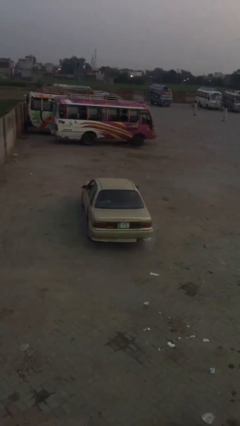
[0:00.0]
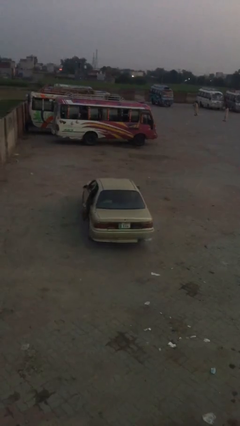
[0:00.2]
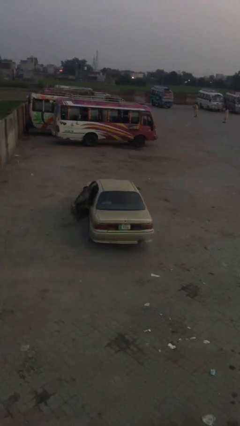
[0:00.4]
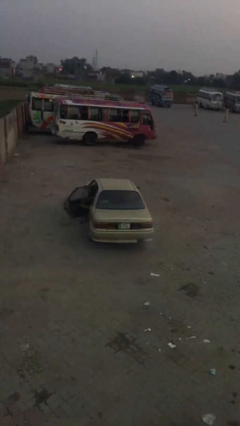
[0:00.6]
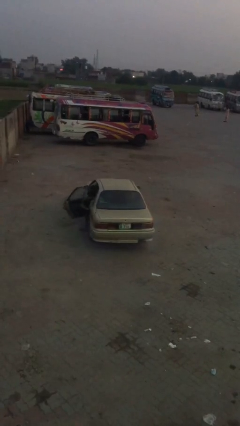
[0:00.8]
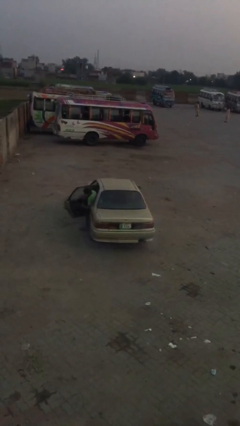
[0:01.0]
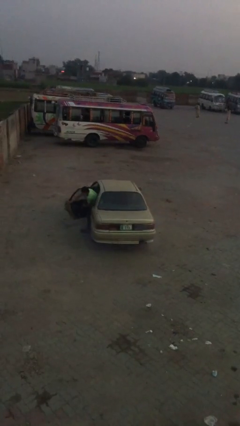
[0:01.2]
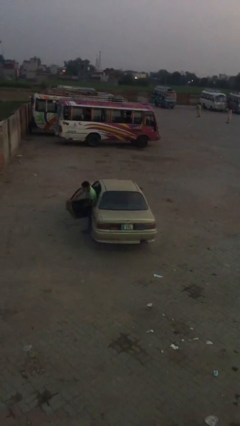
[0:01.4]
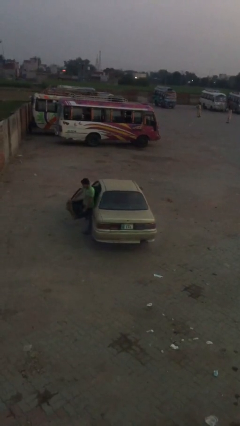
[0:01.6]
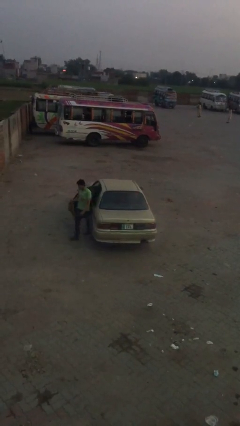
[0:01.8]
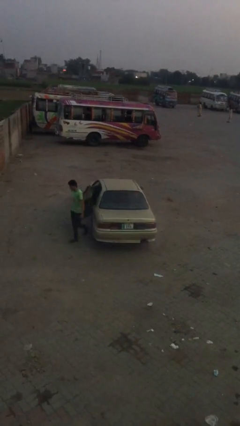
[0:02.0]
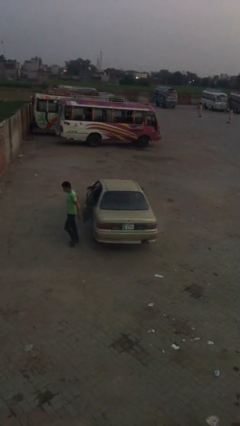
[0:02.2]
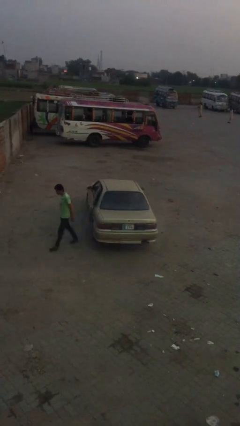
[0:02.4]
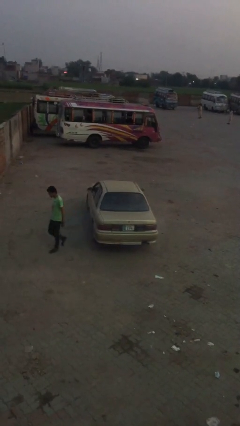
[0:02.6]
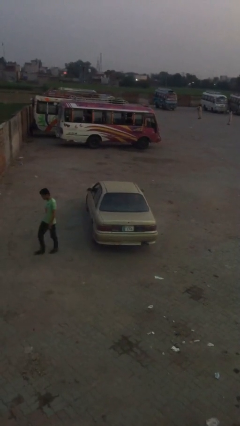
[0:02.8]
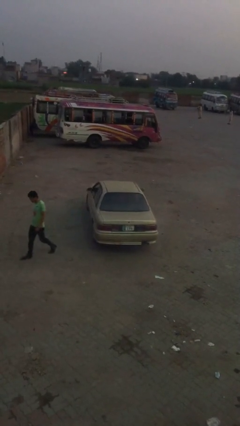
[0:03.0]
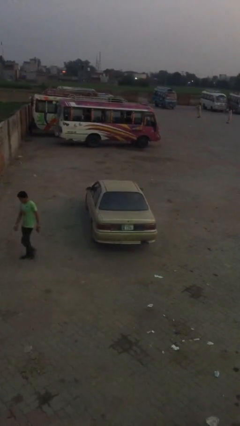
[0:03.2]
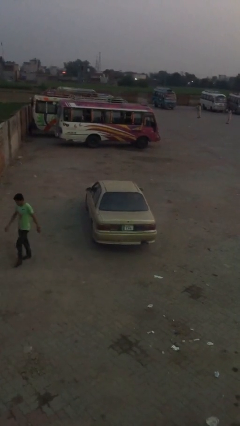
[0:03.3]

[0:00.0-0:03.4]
car drops off person

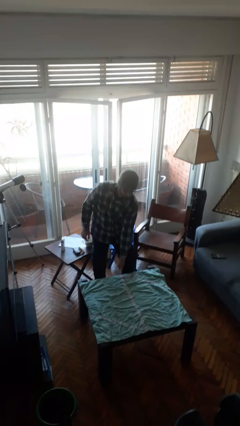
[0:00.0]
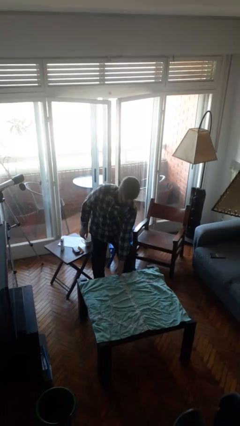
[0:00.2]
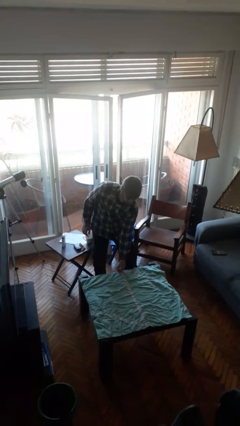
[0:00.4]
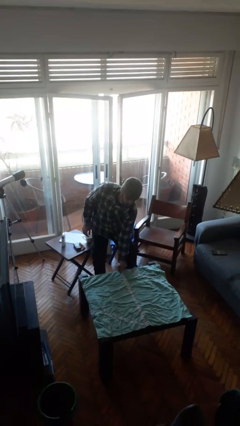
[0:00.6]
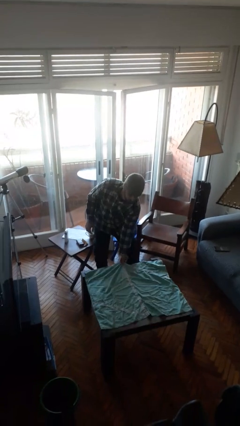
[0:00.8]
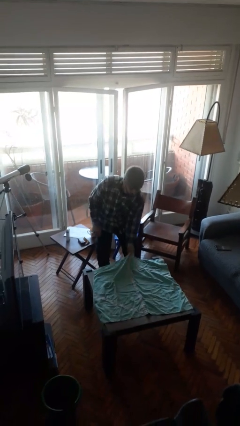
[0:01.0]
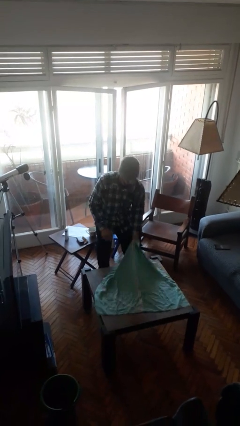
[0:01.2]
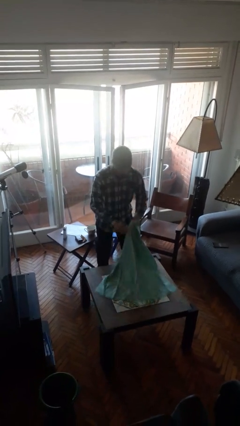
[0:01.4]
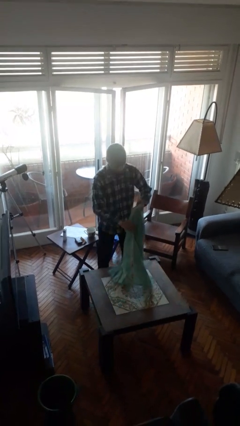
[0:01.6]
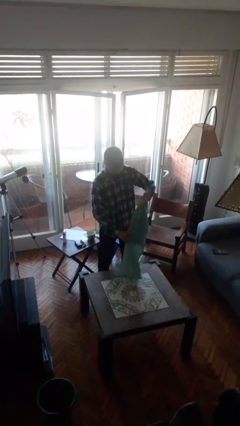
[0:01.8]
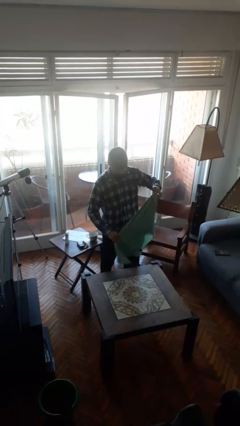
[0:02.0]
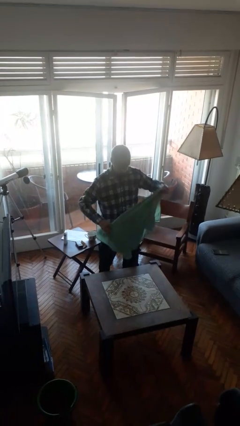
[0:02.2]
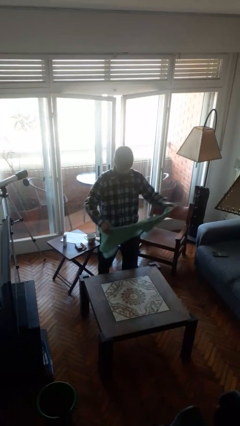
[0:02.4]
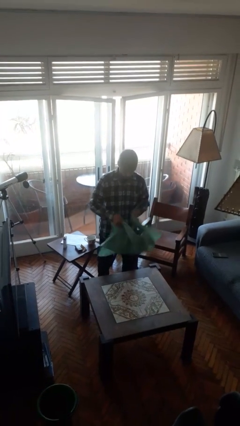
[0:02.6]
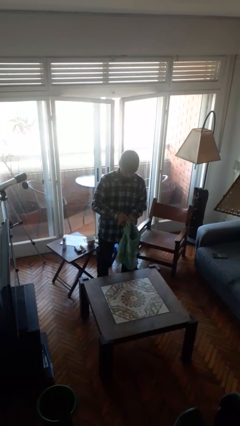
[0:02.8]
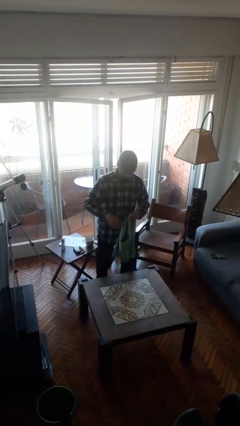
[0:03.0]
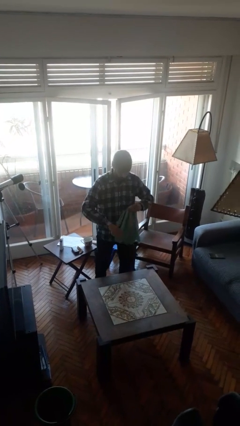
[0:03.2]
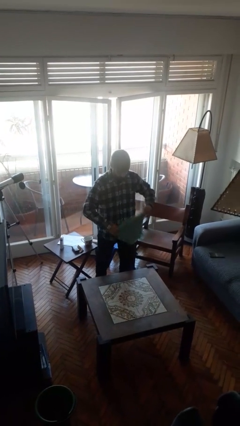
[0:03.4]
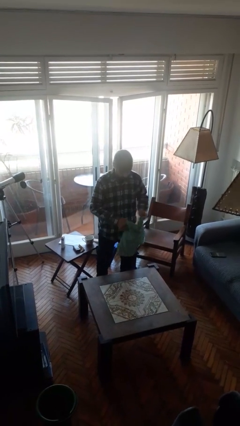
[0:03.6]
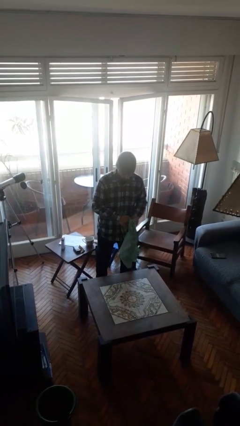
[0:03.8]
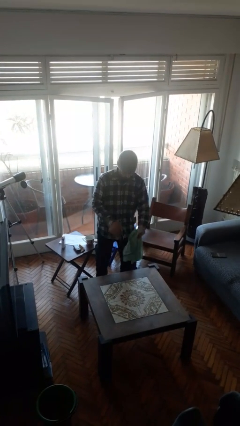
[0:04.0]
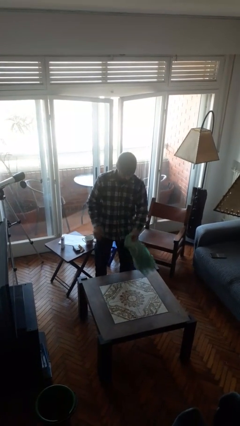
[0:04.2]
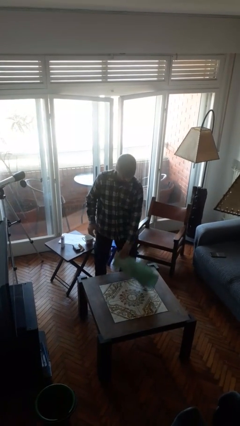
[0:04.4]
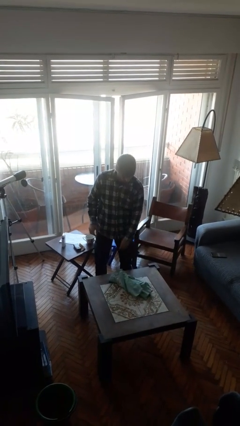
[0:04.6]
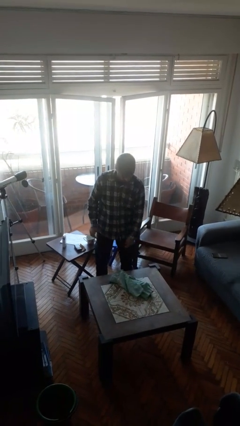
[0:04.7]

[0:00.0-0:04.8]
person folds tablecloth

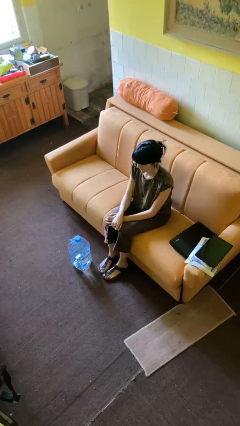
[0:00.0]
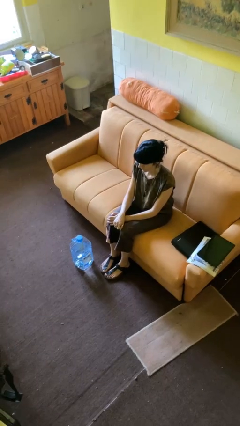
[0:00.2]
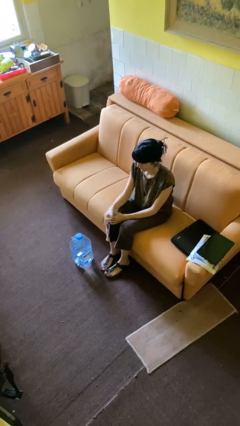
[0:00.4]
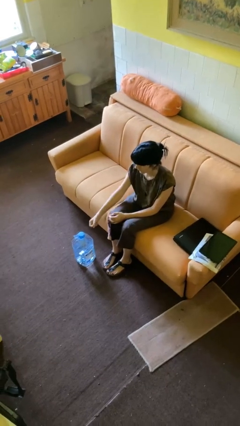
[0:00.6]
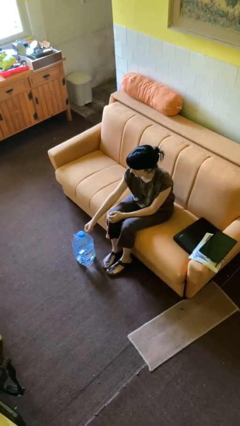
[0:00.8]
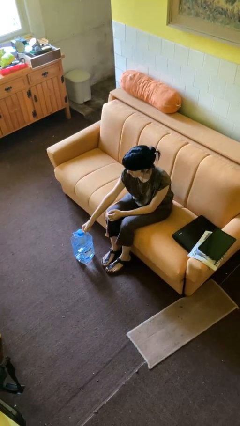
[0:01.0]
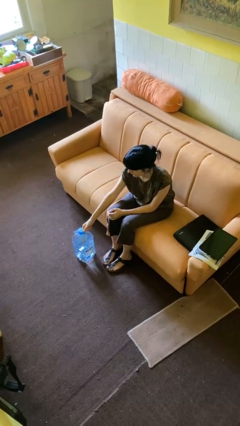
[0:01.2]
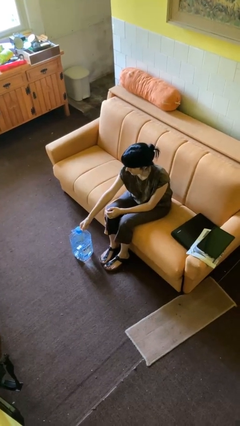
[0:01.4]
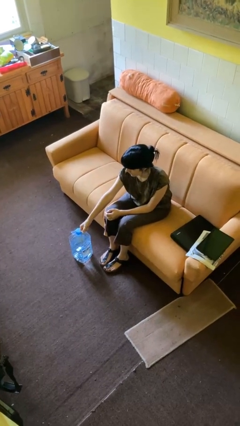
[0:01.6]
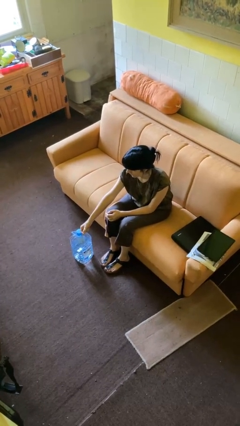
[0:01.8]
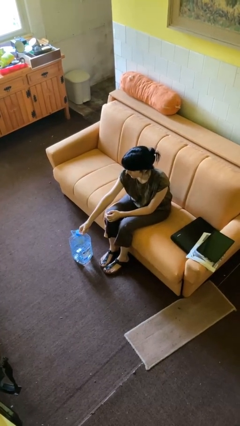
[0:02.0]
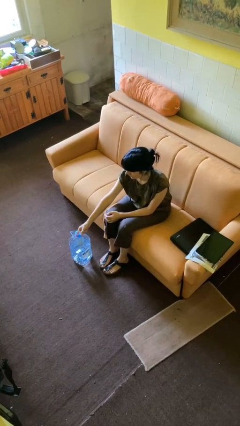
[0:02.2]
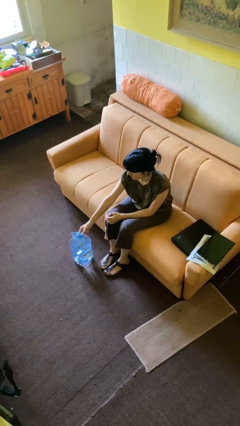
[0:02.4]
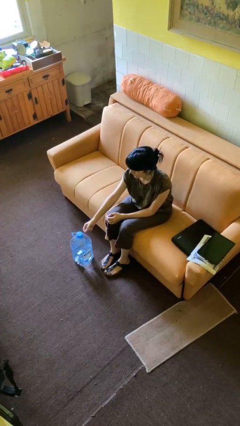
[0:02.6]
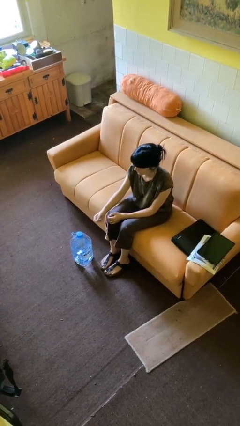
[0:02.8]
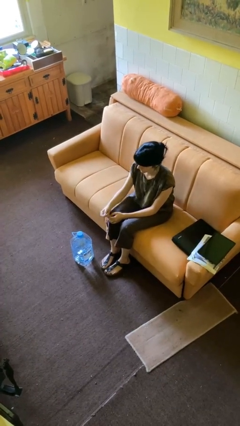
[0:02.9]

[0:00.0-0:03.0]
person taps object with finger

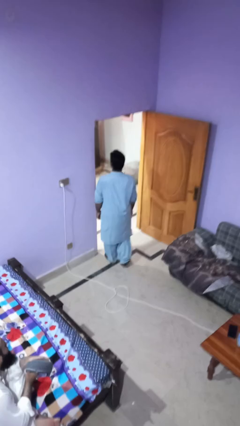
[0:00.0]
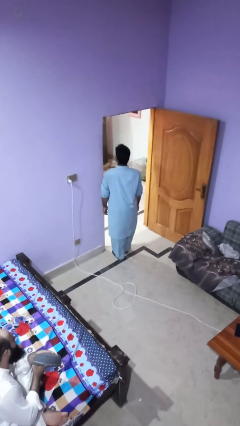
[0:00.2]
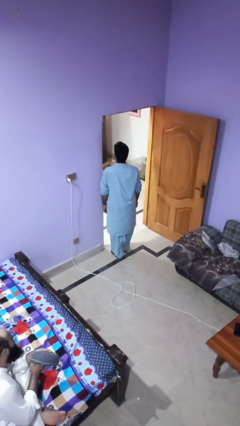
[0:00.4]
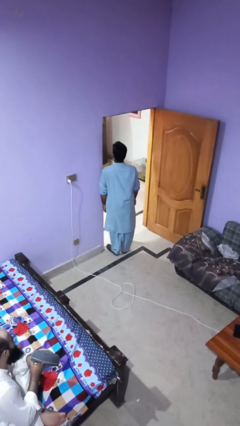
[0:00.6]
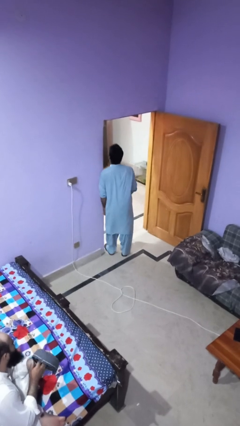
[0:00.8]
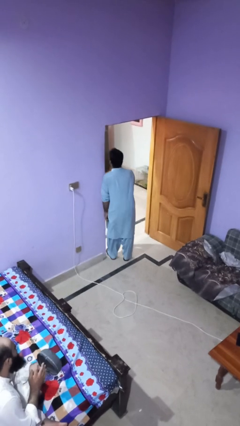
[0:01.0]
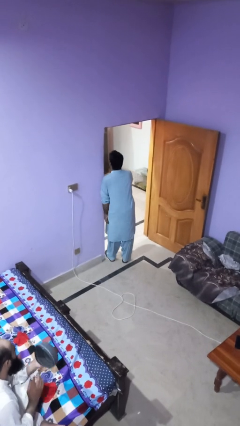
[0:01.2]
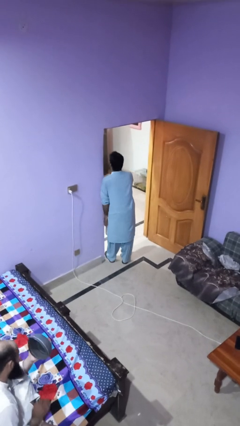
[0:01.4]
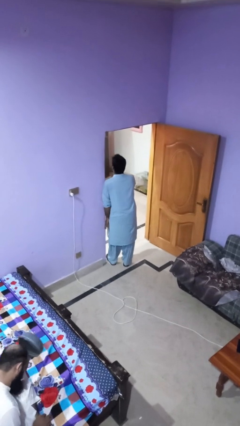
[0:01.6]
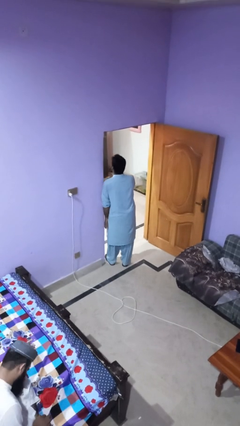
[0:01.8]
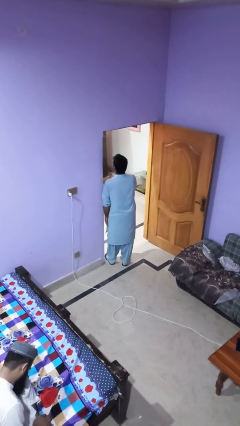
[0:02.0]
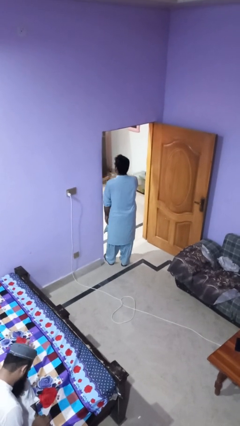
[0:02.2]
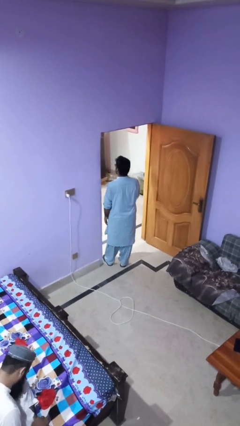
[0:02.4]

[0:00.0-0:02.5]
person bumps into wall

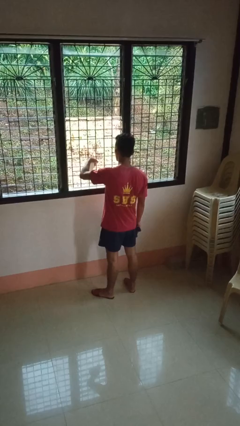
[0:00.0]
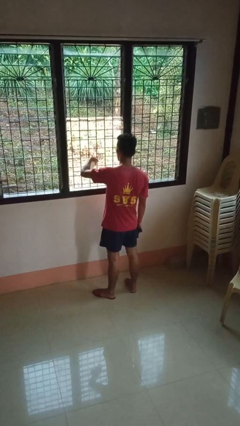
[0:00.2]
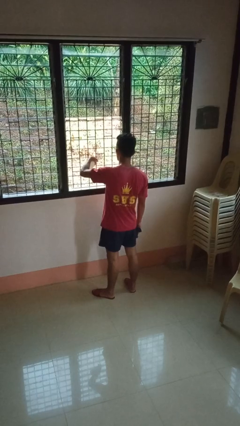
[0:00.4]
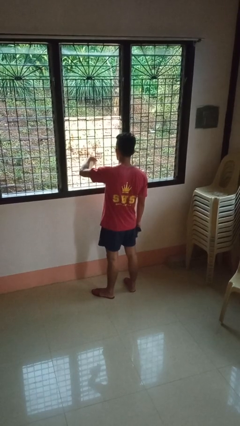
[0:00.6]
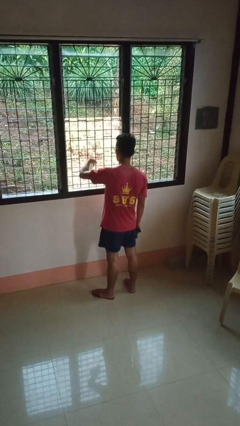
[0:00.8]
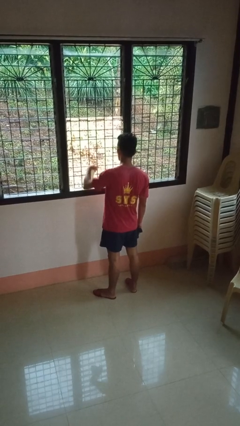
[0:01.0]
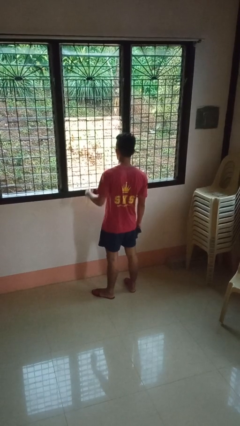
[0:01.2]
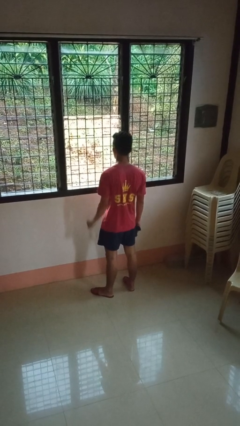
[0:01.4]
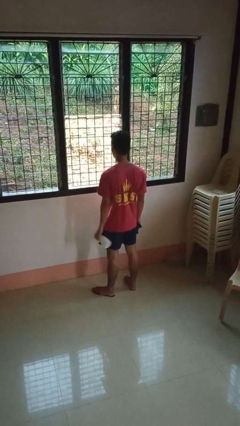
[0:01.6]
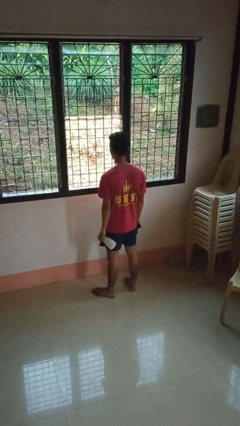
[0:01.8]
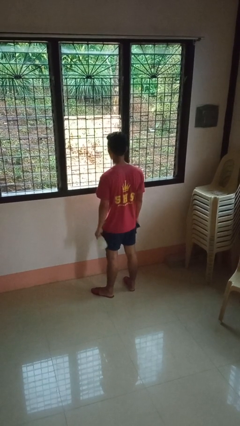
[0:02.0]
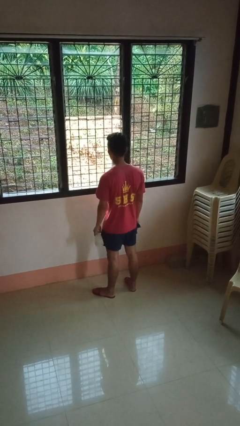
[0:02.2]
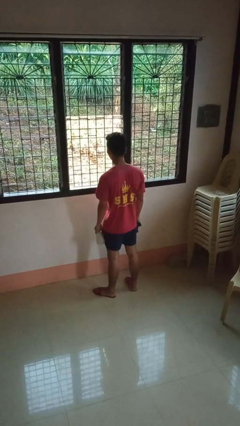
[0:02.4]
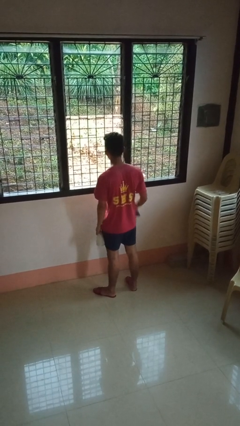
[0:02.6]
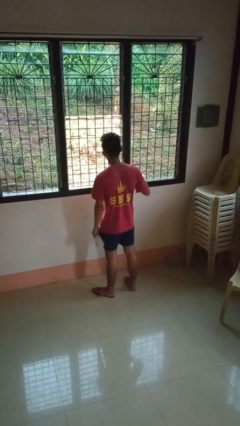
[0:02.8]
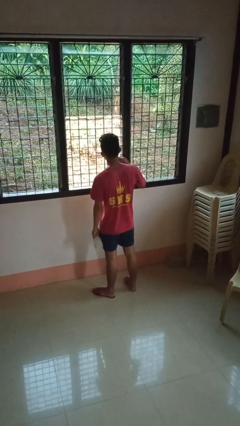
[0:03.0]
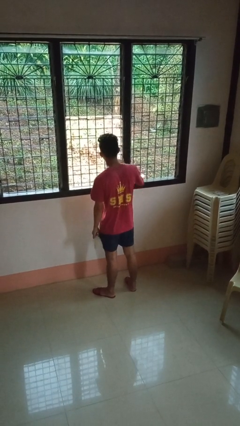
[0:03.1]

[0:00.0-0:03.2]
person sprays from bottle

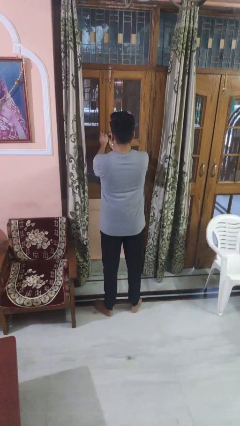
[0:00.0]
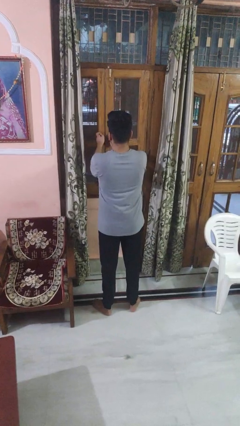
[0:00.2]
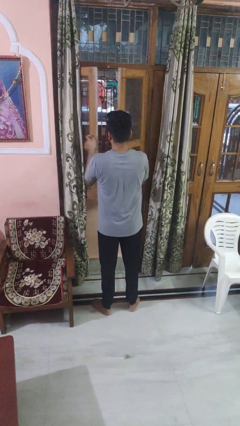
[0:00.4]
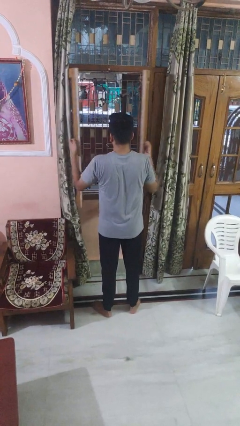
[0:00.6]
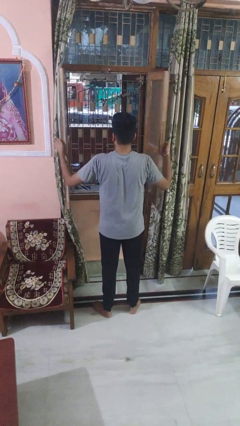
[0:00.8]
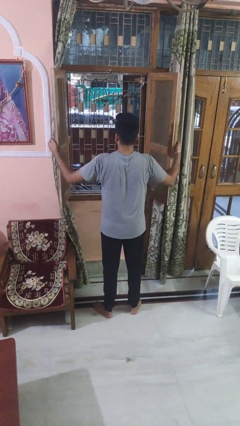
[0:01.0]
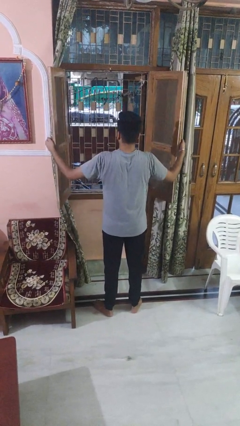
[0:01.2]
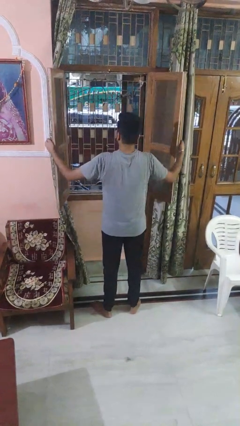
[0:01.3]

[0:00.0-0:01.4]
person opens home window
